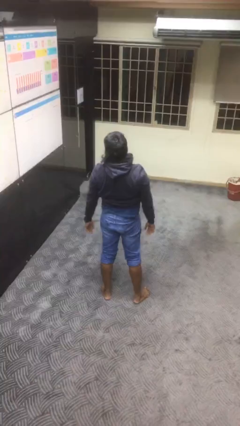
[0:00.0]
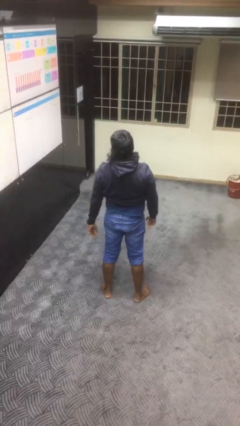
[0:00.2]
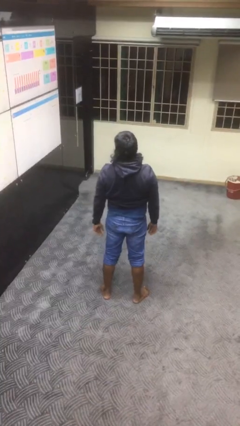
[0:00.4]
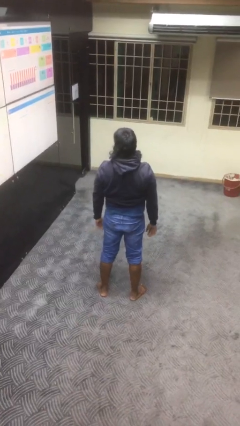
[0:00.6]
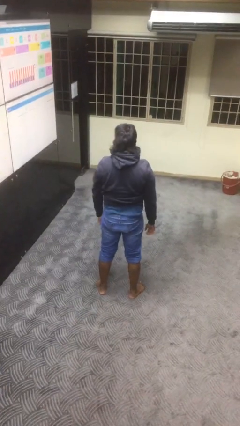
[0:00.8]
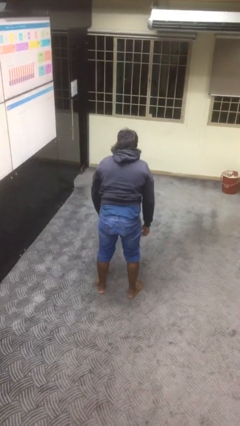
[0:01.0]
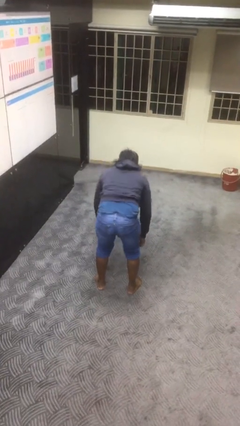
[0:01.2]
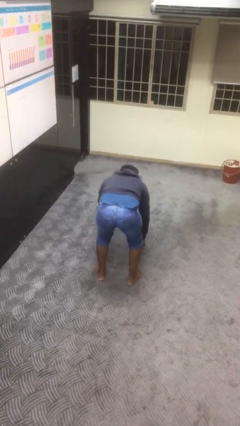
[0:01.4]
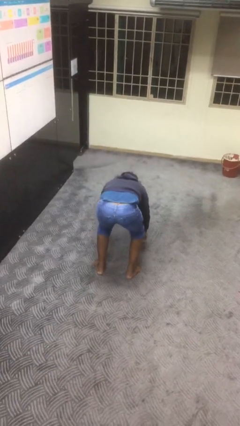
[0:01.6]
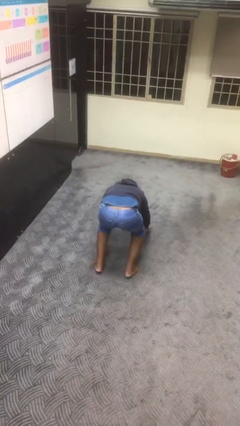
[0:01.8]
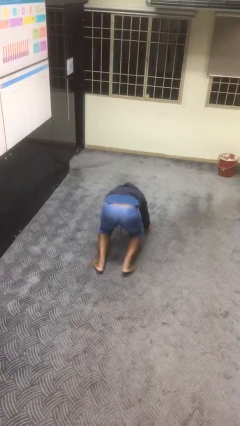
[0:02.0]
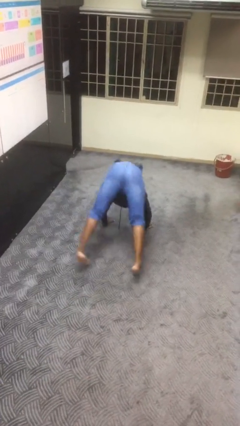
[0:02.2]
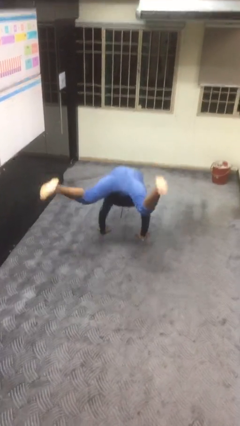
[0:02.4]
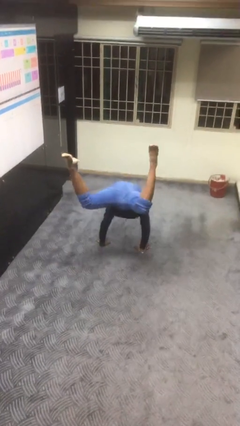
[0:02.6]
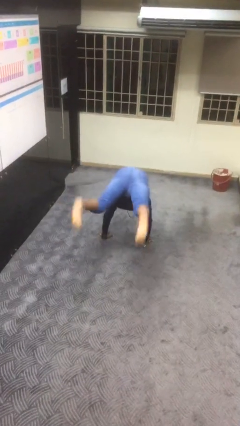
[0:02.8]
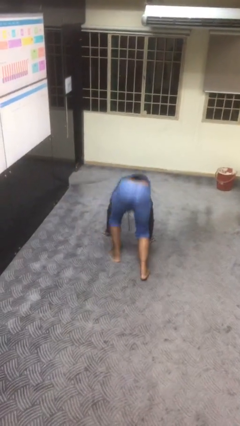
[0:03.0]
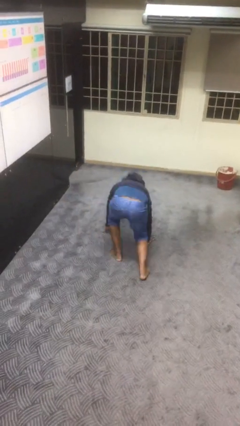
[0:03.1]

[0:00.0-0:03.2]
person handstand

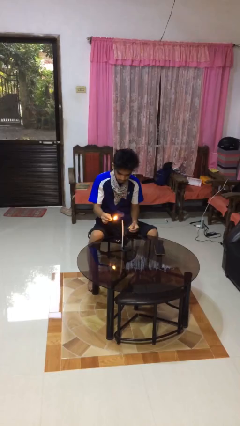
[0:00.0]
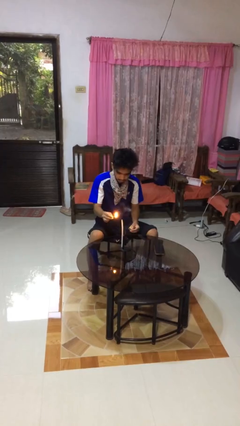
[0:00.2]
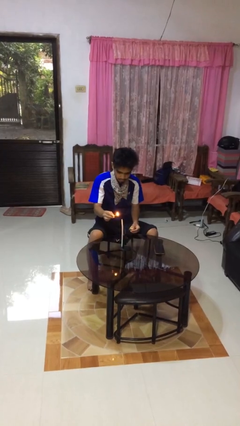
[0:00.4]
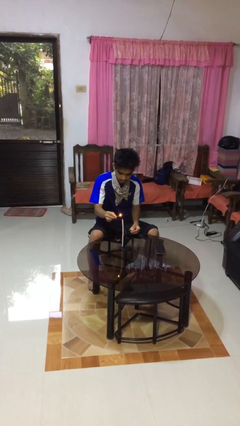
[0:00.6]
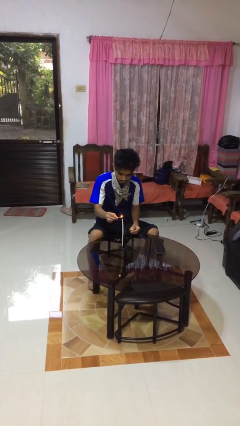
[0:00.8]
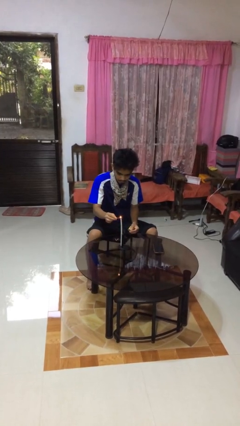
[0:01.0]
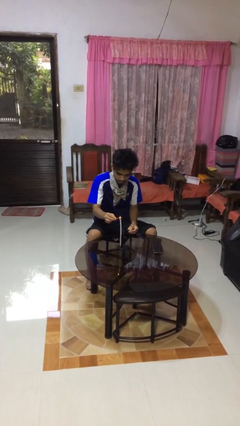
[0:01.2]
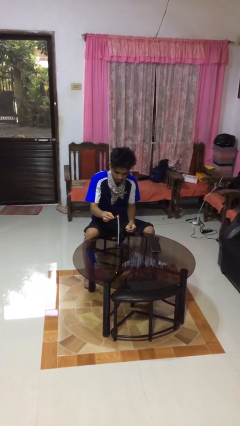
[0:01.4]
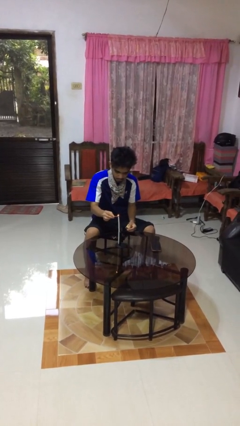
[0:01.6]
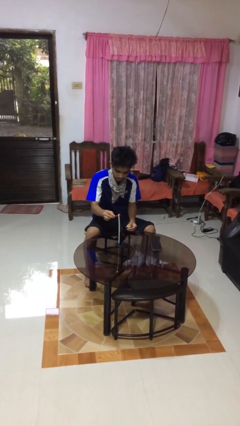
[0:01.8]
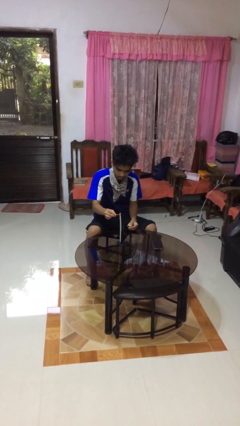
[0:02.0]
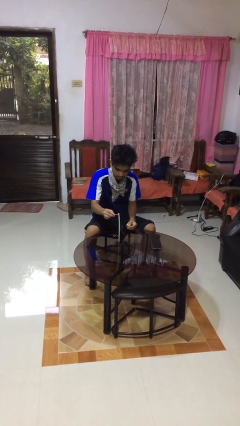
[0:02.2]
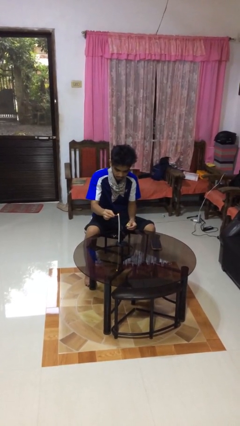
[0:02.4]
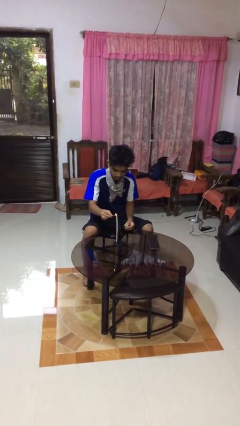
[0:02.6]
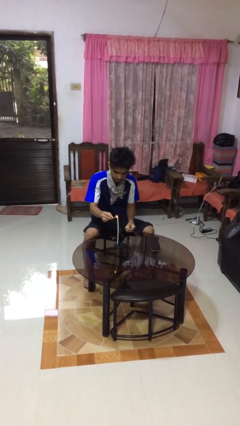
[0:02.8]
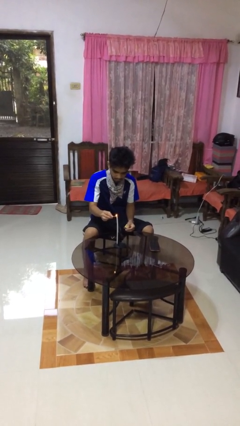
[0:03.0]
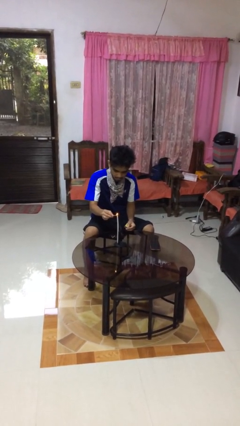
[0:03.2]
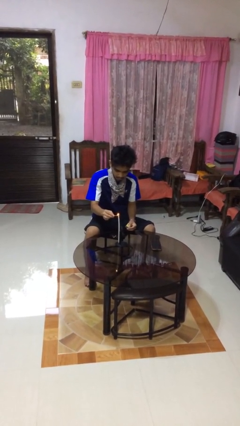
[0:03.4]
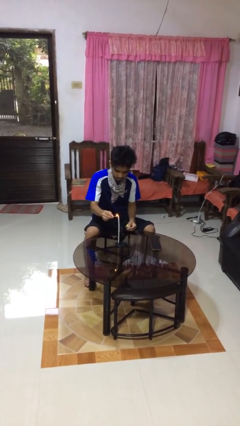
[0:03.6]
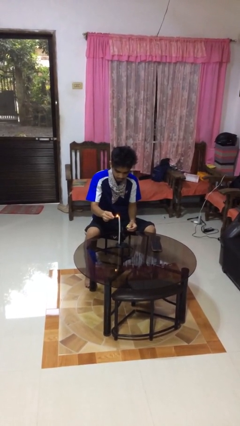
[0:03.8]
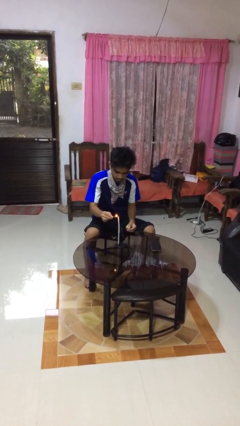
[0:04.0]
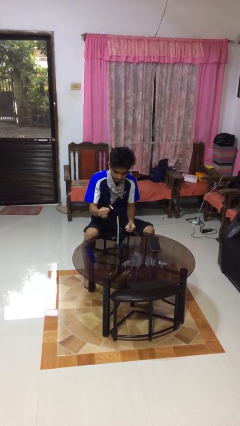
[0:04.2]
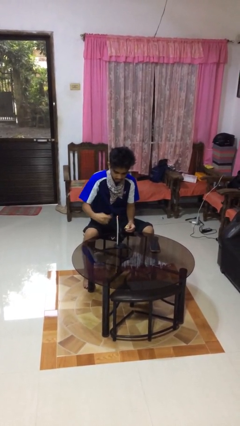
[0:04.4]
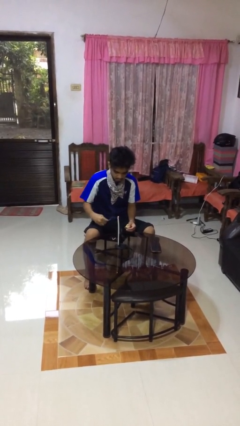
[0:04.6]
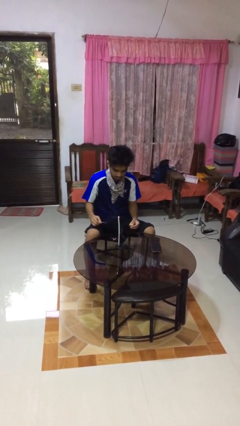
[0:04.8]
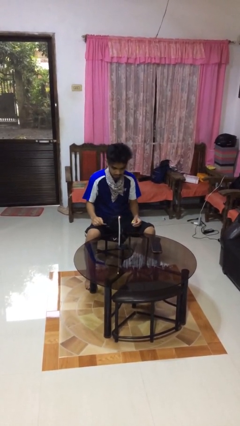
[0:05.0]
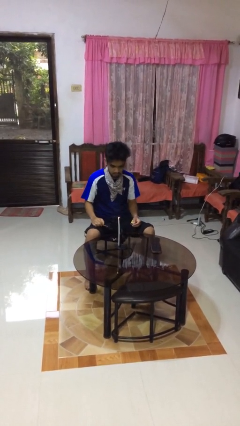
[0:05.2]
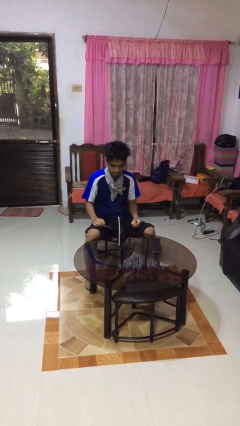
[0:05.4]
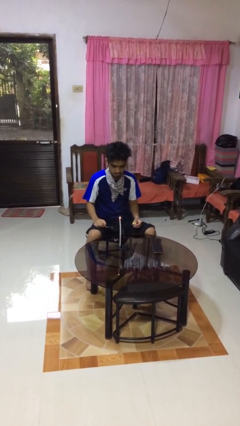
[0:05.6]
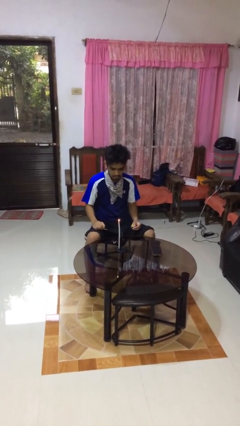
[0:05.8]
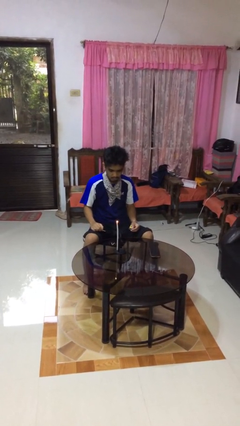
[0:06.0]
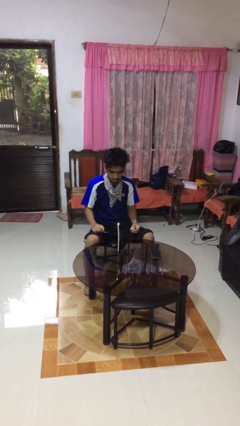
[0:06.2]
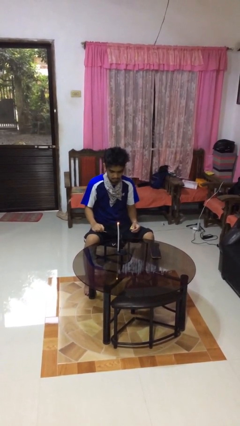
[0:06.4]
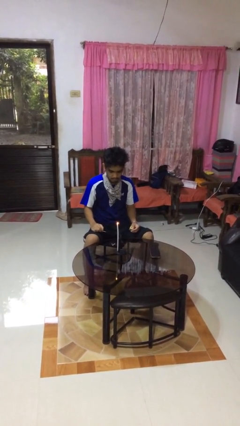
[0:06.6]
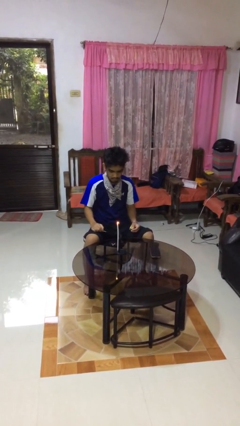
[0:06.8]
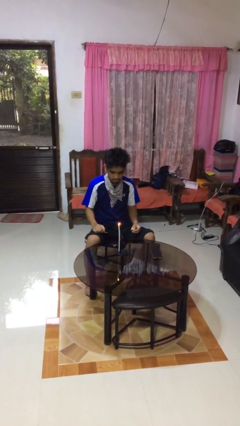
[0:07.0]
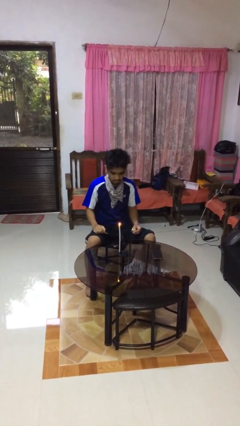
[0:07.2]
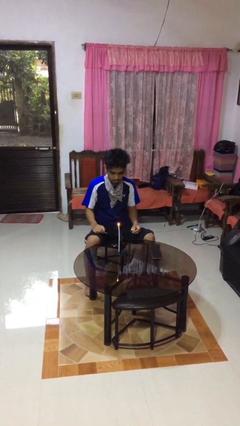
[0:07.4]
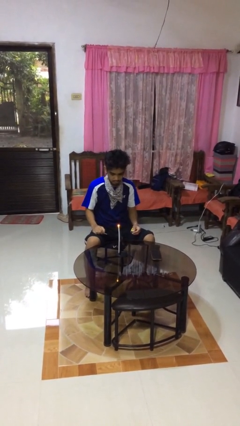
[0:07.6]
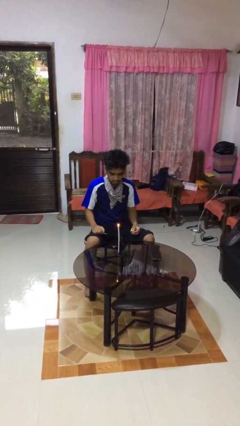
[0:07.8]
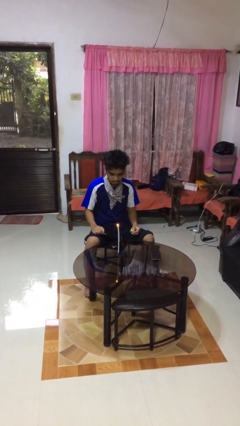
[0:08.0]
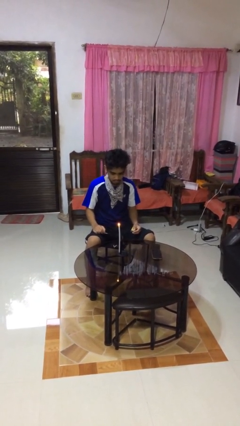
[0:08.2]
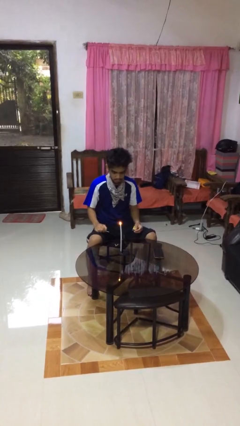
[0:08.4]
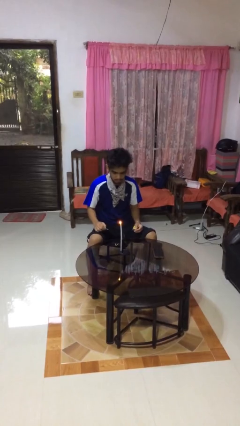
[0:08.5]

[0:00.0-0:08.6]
person lights candle

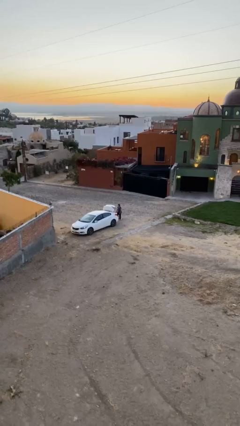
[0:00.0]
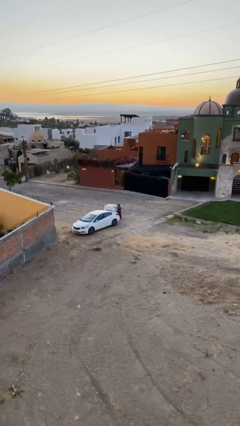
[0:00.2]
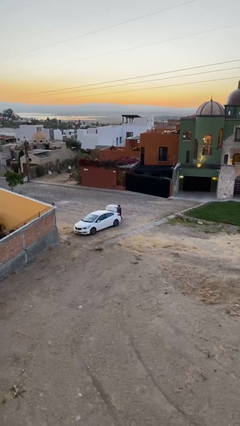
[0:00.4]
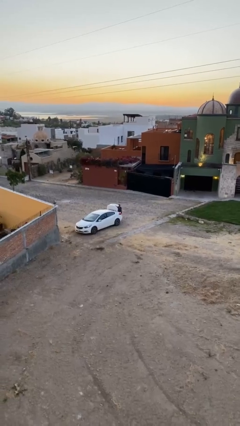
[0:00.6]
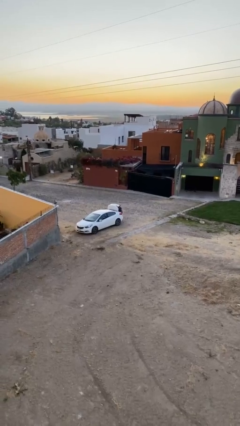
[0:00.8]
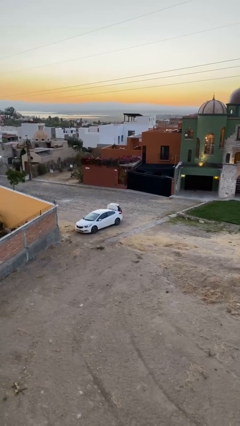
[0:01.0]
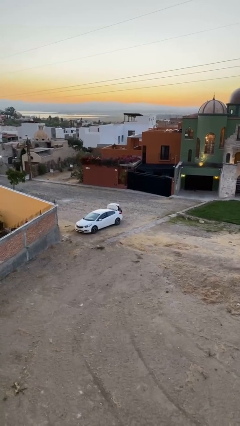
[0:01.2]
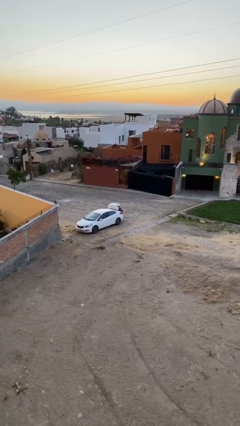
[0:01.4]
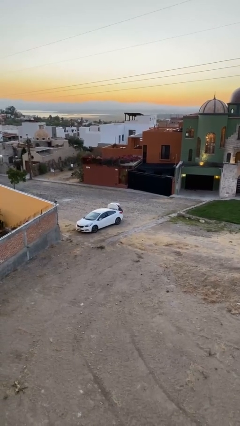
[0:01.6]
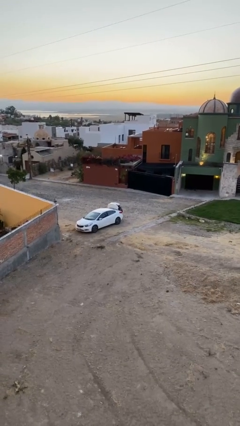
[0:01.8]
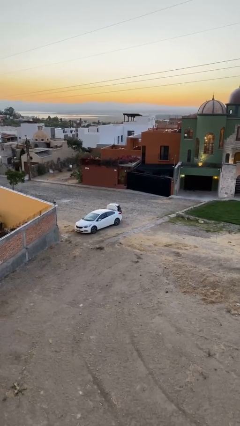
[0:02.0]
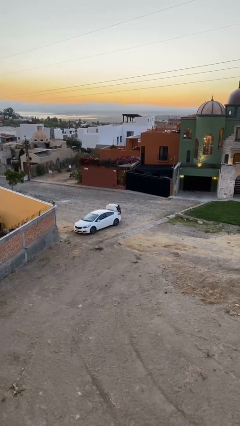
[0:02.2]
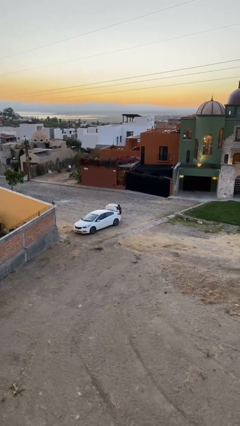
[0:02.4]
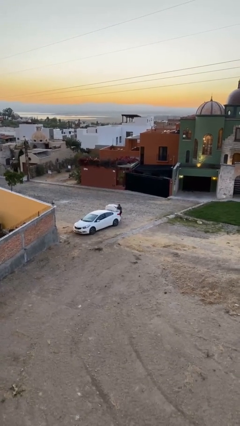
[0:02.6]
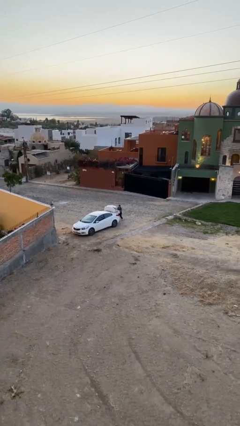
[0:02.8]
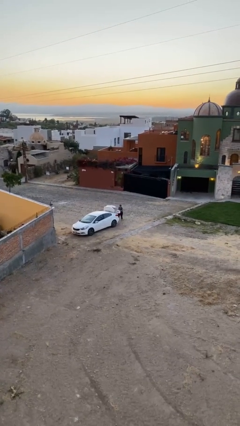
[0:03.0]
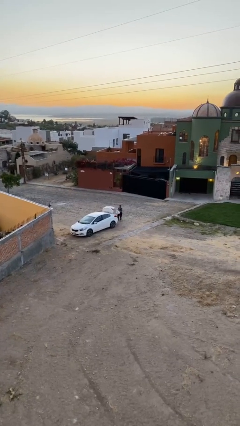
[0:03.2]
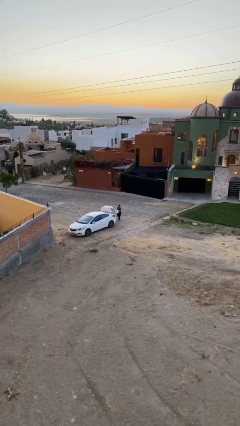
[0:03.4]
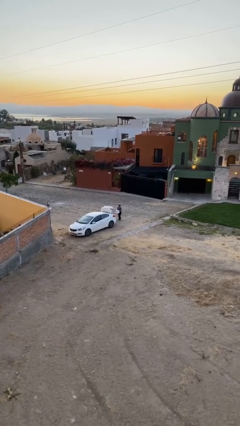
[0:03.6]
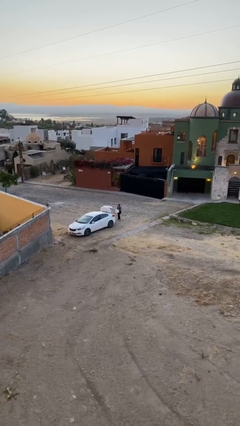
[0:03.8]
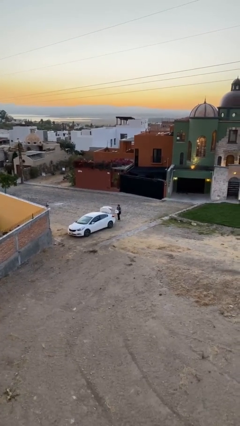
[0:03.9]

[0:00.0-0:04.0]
person unloads car

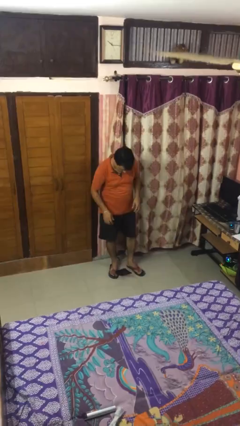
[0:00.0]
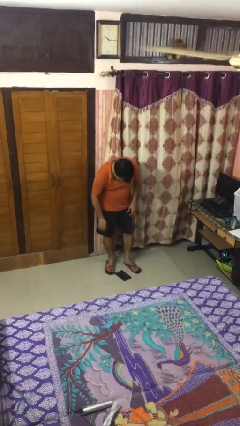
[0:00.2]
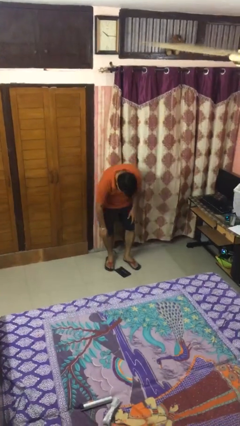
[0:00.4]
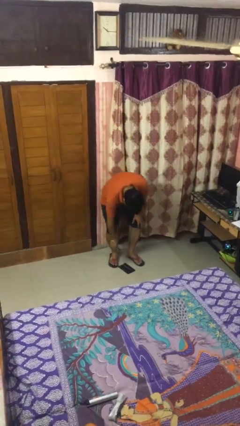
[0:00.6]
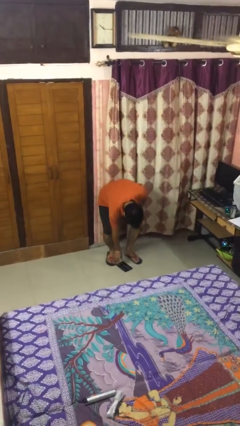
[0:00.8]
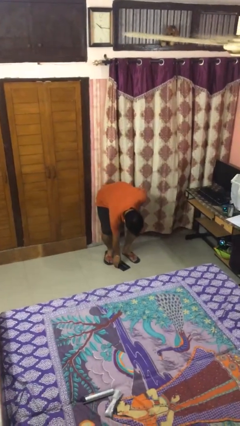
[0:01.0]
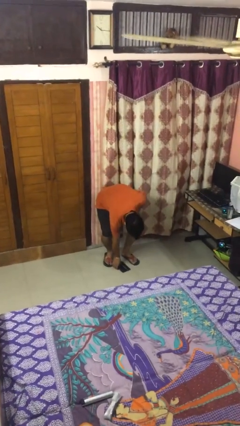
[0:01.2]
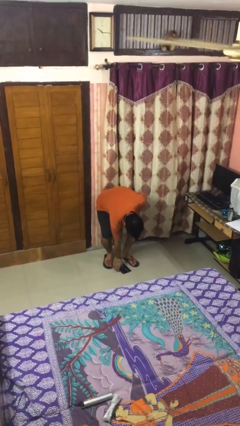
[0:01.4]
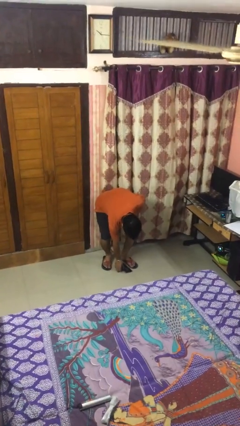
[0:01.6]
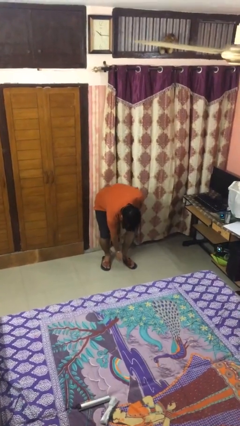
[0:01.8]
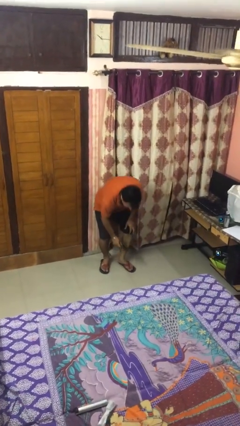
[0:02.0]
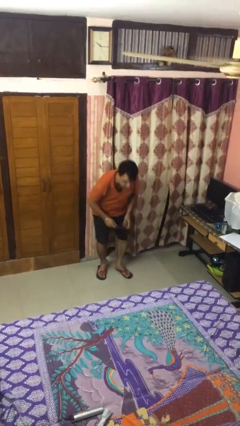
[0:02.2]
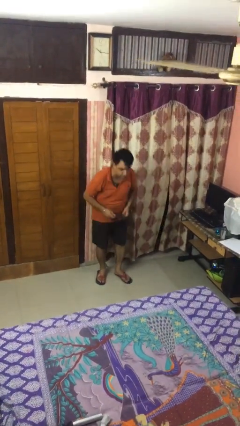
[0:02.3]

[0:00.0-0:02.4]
person picks up object from floor
